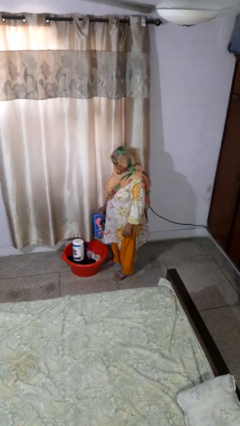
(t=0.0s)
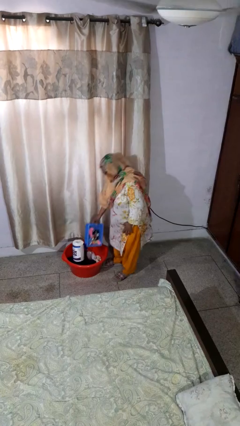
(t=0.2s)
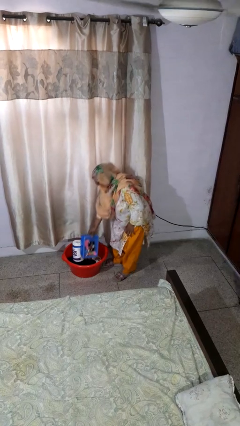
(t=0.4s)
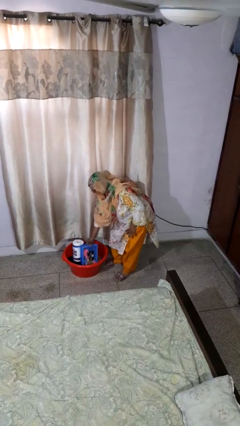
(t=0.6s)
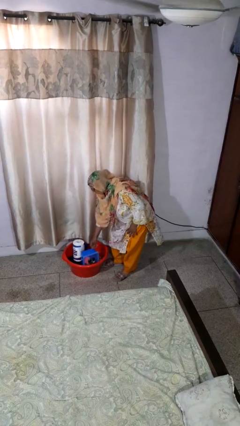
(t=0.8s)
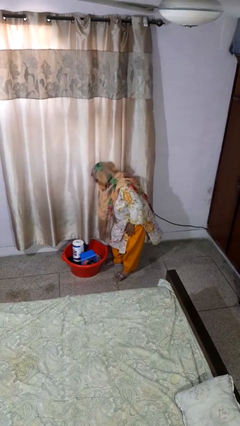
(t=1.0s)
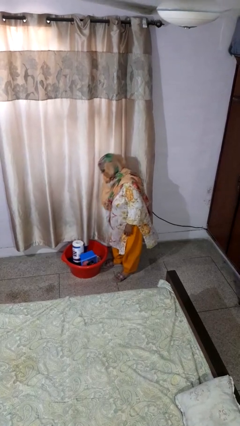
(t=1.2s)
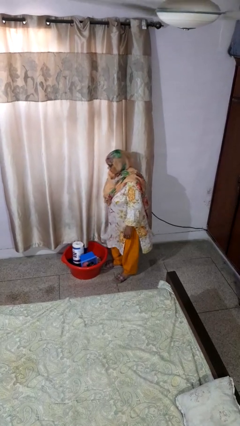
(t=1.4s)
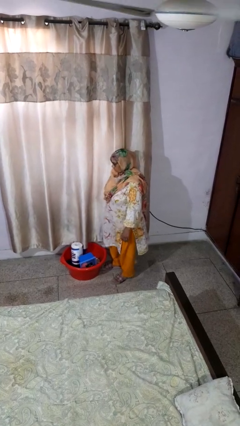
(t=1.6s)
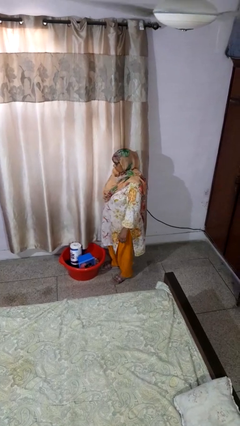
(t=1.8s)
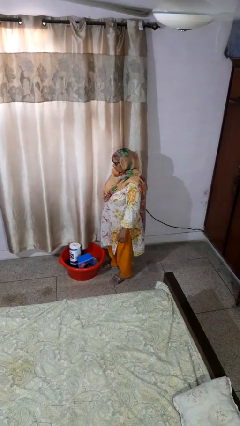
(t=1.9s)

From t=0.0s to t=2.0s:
person puts object into basket

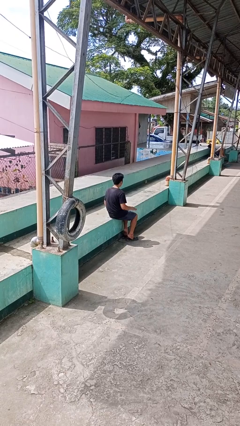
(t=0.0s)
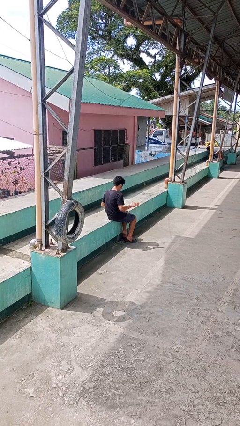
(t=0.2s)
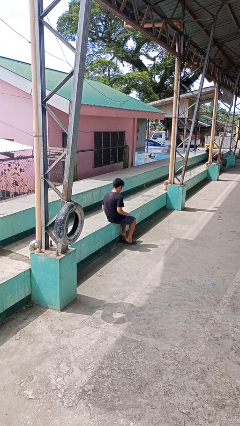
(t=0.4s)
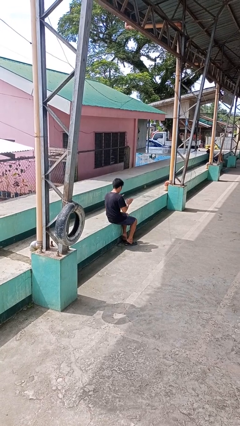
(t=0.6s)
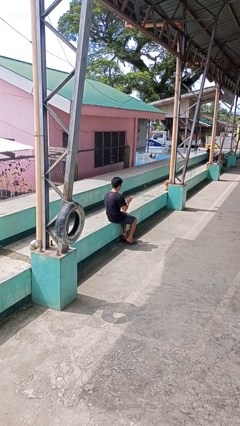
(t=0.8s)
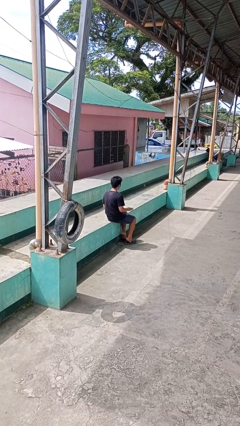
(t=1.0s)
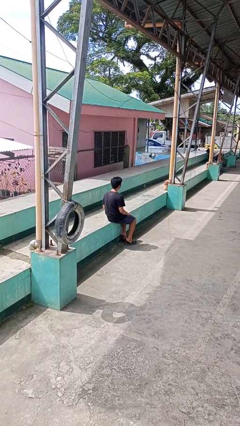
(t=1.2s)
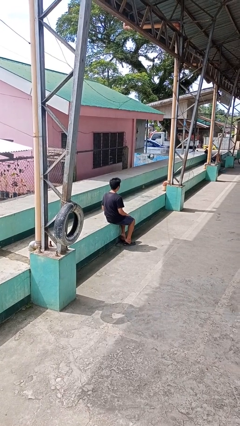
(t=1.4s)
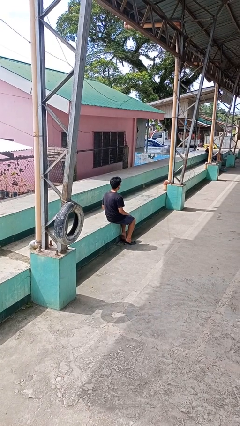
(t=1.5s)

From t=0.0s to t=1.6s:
person slaps hands on thighs

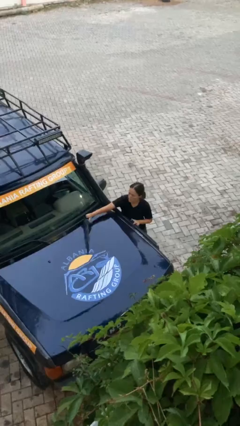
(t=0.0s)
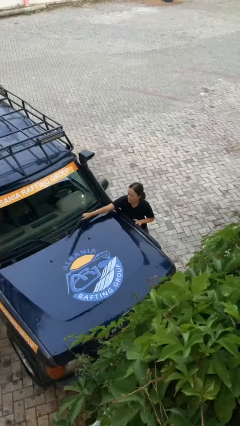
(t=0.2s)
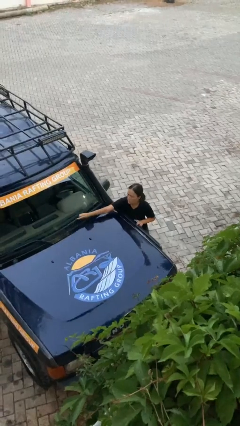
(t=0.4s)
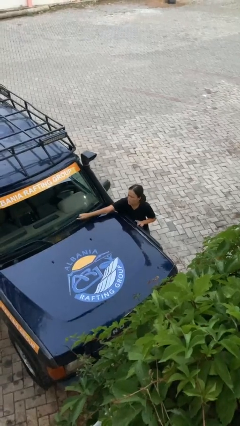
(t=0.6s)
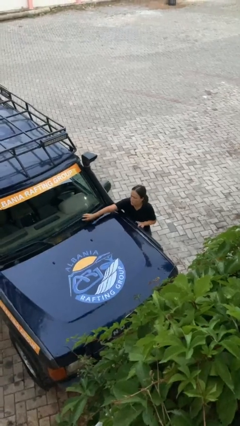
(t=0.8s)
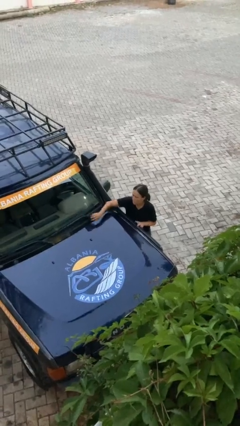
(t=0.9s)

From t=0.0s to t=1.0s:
person flips down car wipers

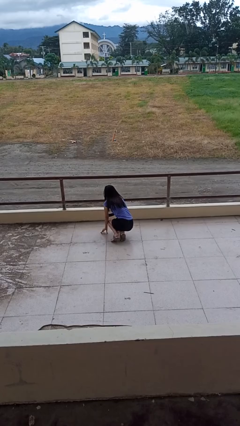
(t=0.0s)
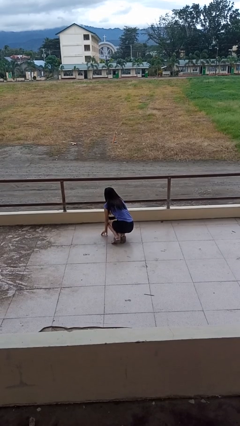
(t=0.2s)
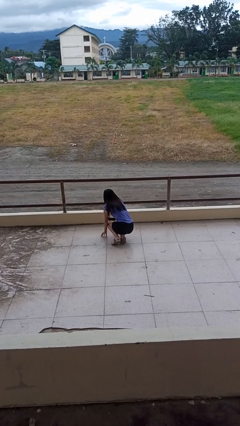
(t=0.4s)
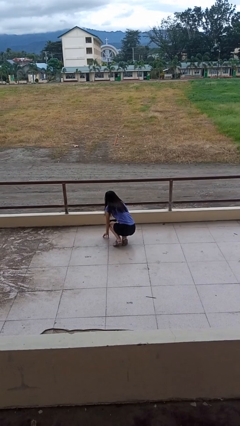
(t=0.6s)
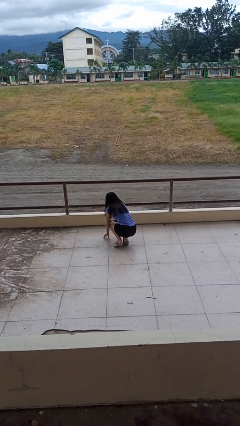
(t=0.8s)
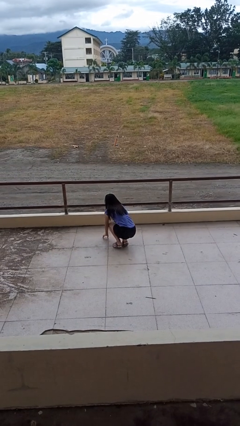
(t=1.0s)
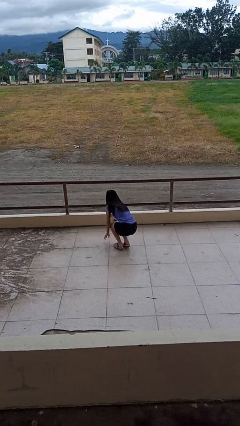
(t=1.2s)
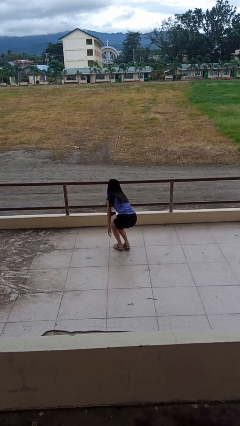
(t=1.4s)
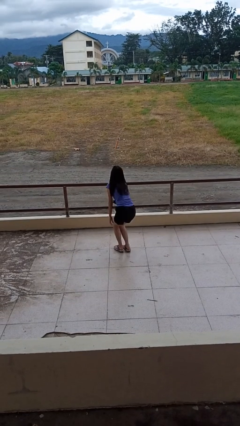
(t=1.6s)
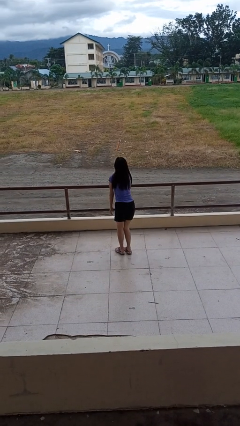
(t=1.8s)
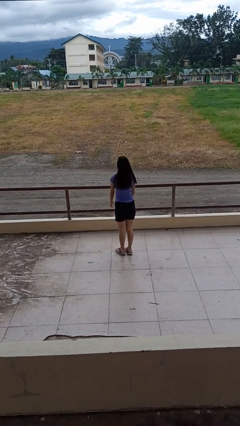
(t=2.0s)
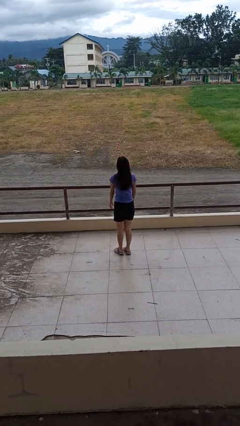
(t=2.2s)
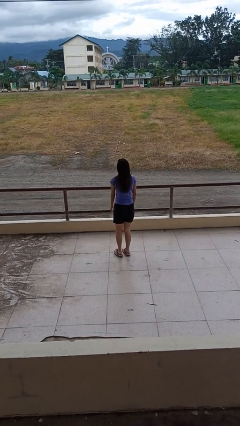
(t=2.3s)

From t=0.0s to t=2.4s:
person stands up from floor

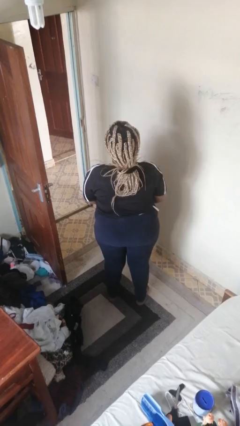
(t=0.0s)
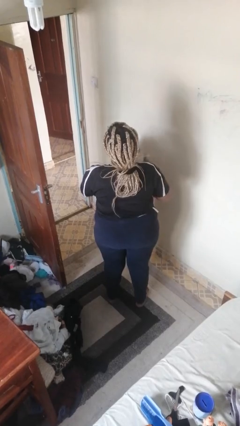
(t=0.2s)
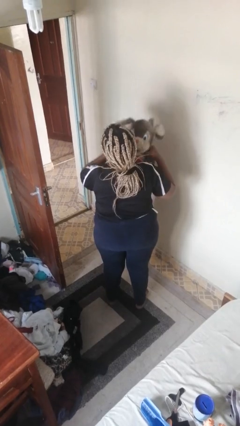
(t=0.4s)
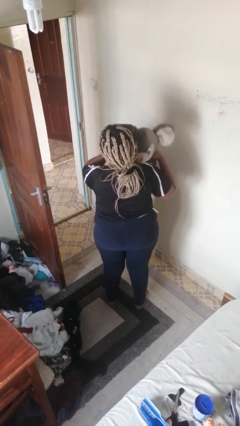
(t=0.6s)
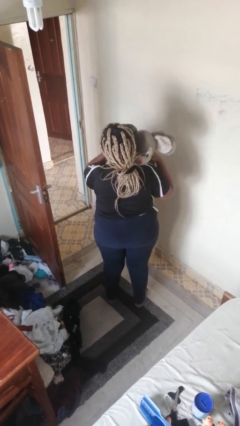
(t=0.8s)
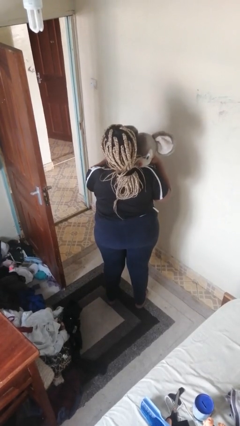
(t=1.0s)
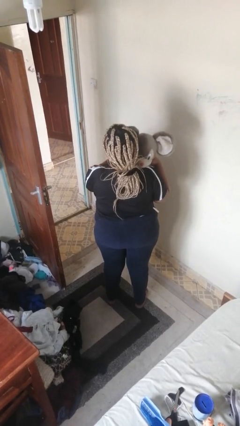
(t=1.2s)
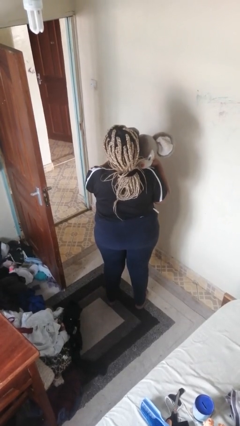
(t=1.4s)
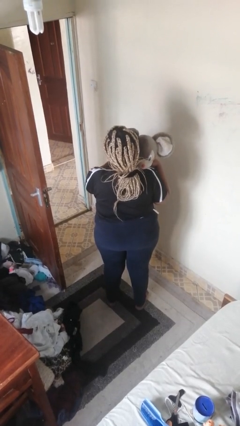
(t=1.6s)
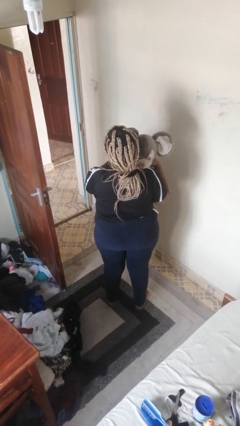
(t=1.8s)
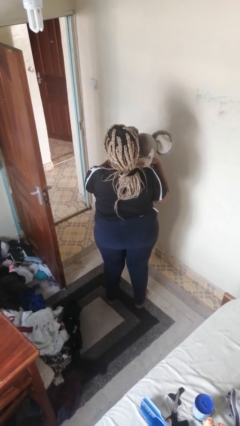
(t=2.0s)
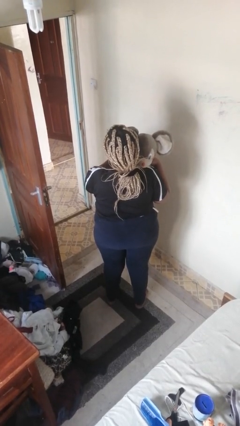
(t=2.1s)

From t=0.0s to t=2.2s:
person hugs stuffed animal

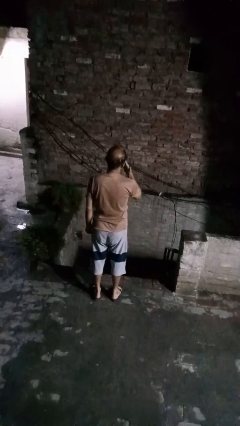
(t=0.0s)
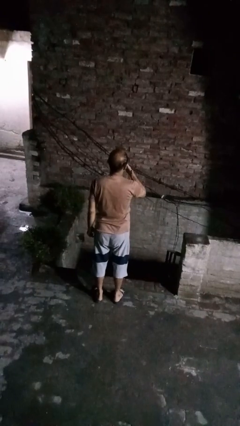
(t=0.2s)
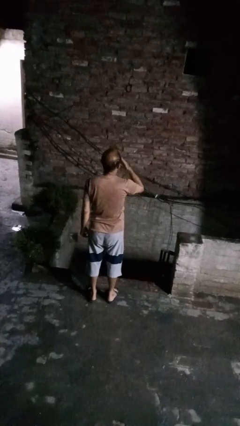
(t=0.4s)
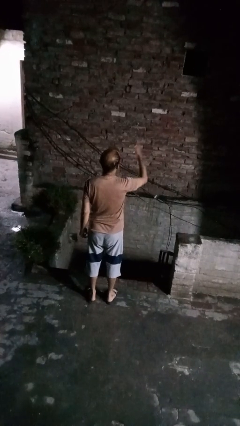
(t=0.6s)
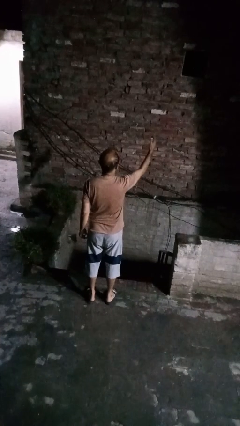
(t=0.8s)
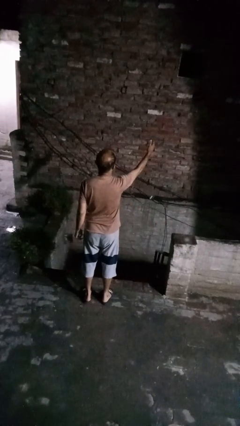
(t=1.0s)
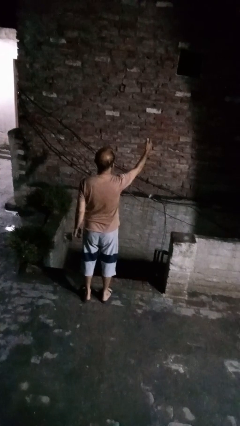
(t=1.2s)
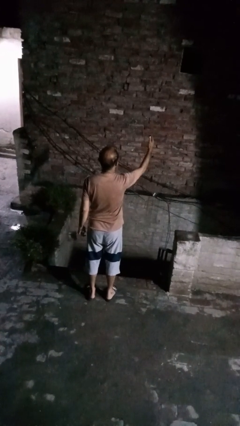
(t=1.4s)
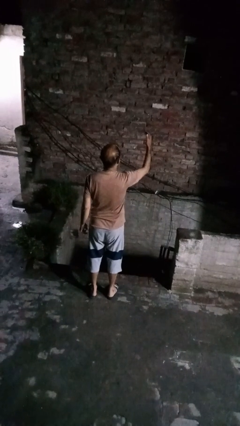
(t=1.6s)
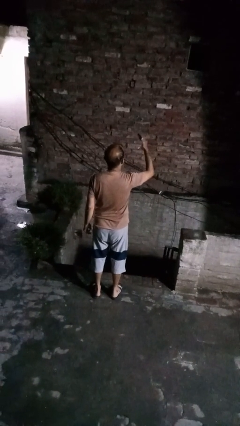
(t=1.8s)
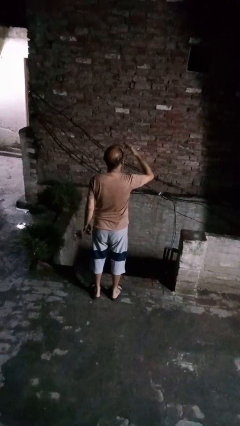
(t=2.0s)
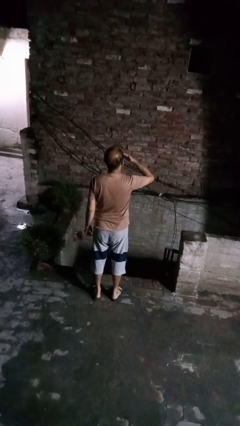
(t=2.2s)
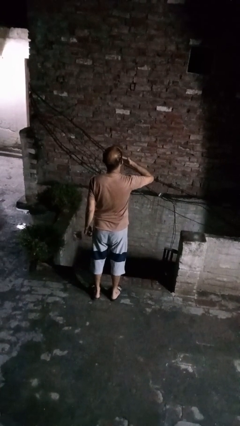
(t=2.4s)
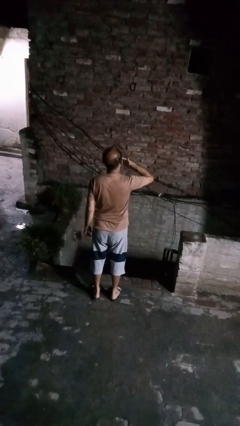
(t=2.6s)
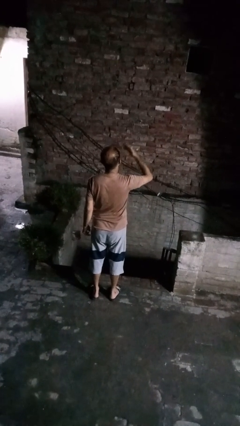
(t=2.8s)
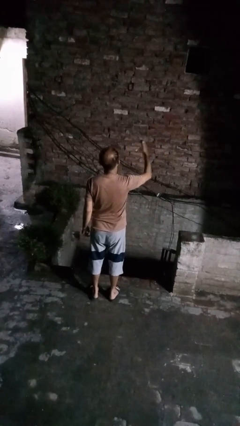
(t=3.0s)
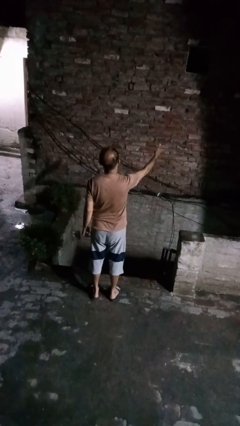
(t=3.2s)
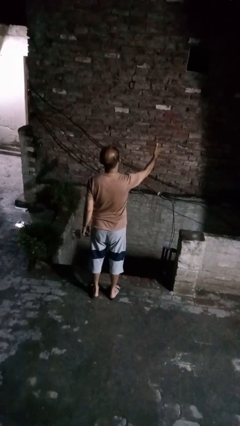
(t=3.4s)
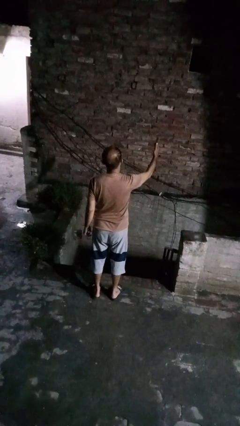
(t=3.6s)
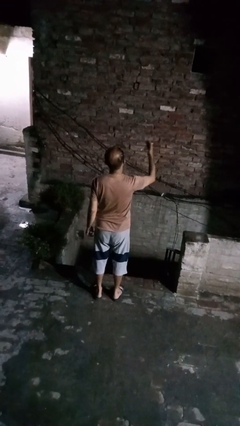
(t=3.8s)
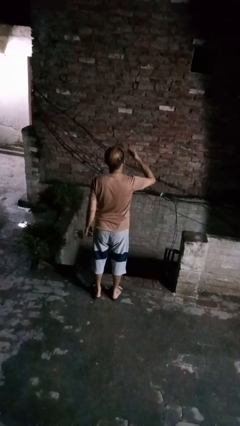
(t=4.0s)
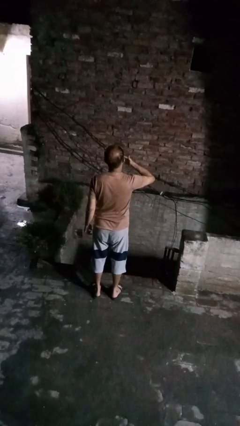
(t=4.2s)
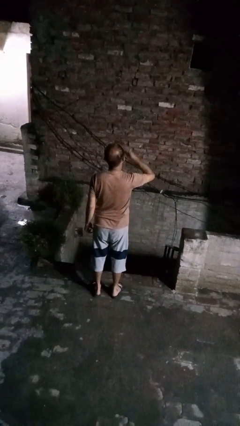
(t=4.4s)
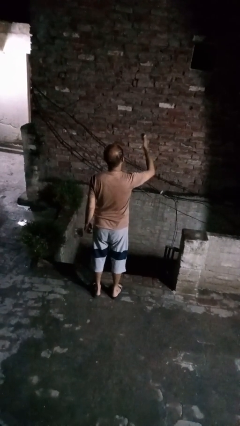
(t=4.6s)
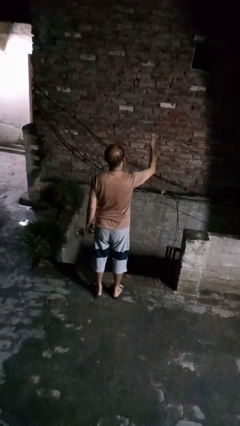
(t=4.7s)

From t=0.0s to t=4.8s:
person gestures blow kiss

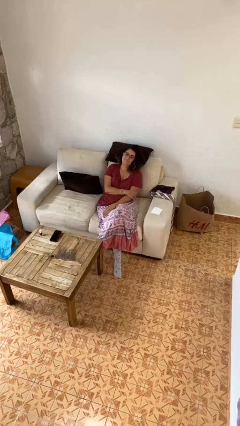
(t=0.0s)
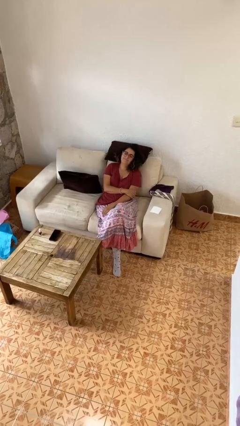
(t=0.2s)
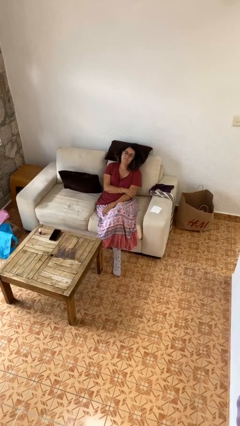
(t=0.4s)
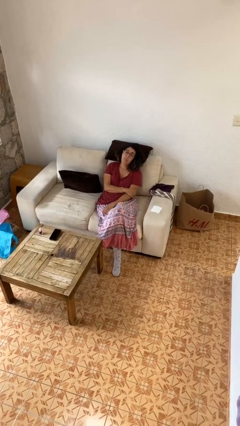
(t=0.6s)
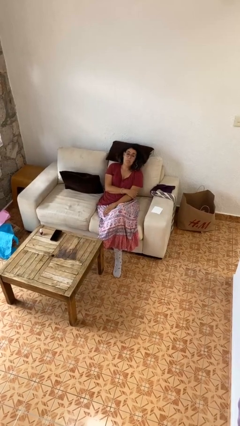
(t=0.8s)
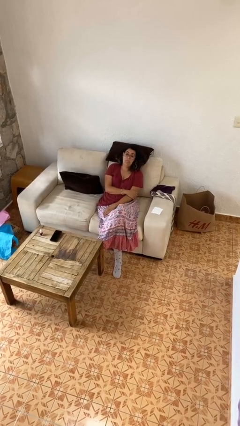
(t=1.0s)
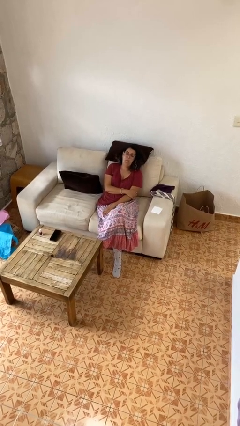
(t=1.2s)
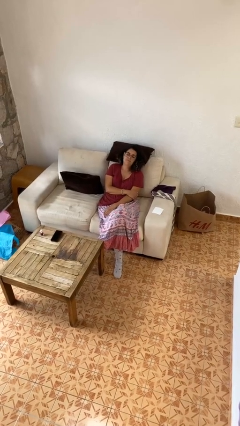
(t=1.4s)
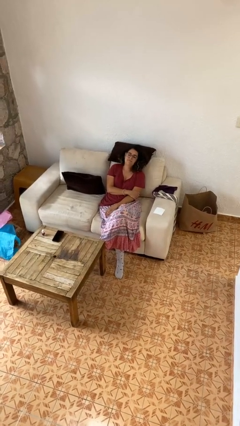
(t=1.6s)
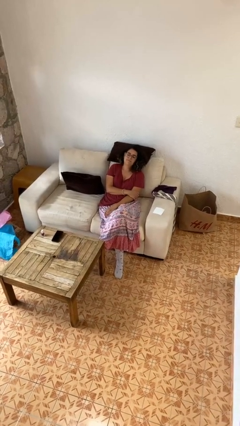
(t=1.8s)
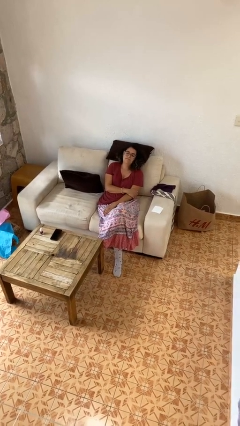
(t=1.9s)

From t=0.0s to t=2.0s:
person sticks out tongue

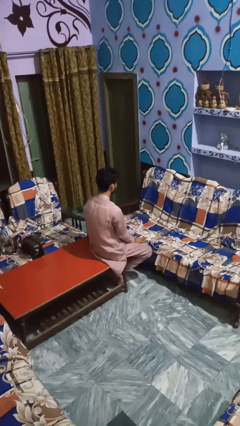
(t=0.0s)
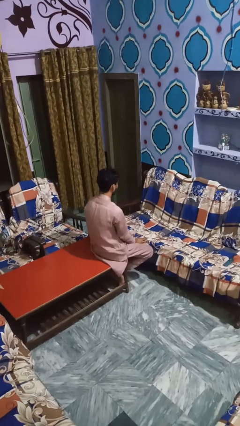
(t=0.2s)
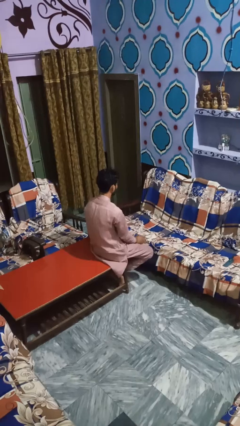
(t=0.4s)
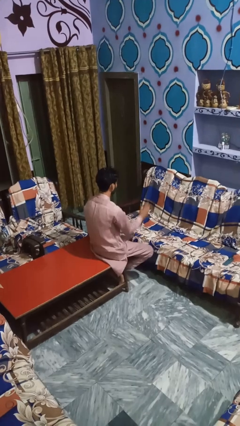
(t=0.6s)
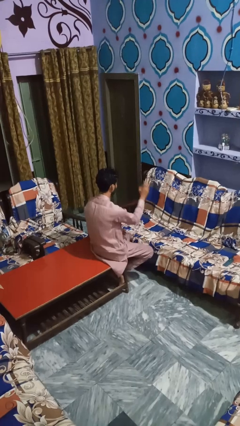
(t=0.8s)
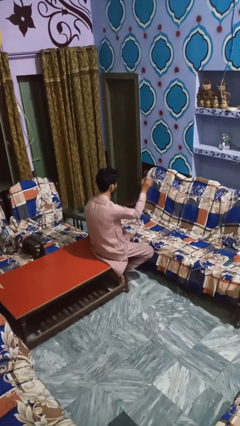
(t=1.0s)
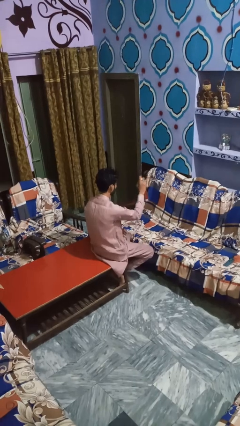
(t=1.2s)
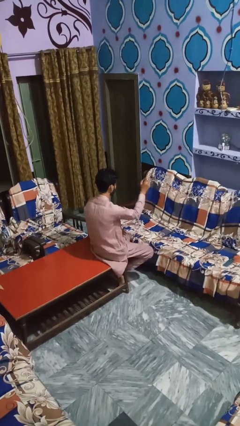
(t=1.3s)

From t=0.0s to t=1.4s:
person sprays from bottle
